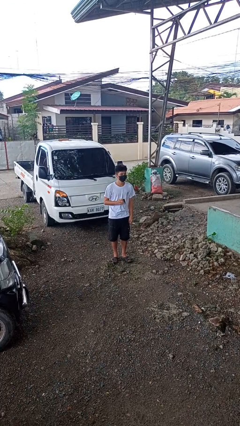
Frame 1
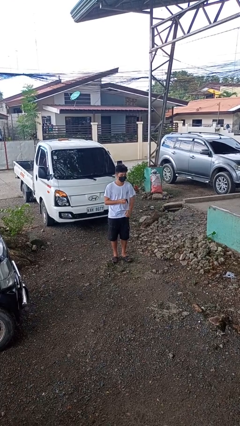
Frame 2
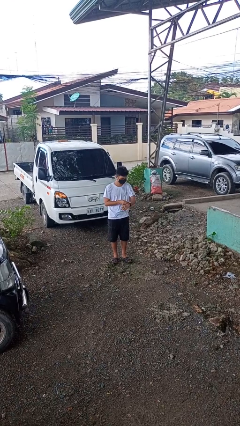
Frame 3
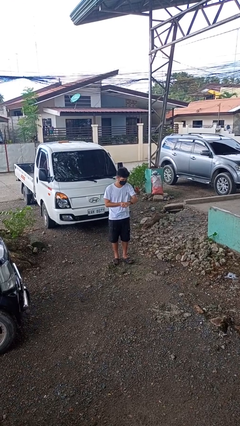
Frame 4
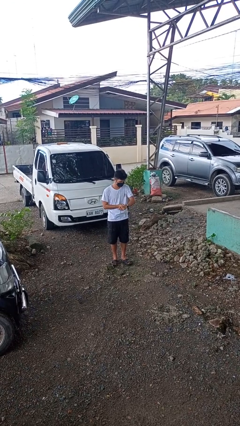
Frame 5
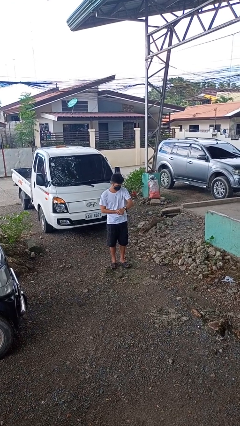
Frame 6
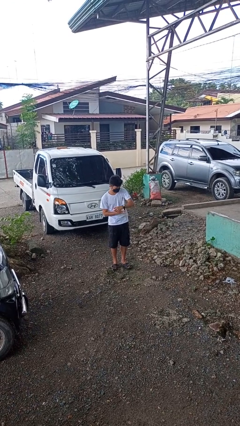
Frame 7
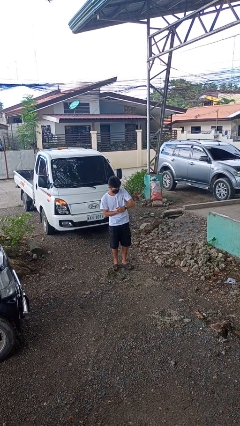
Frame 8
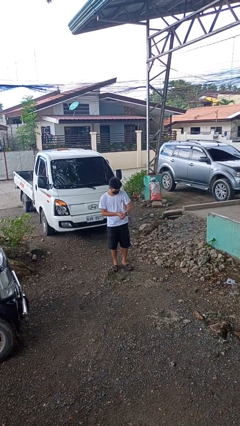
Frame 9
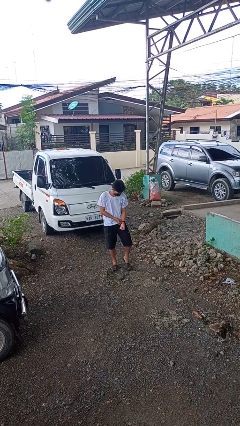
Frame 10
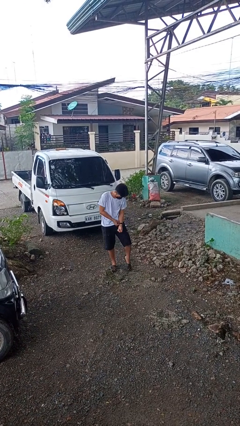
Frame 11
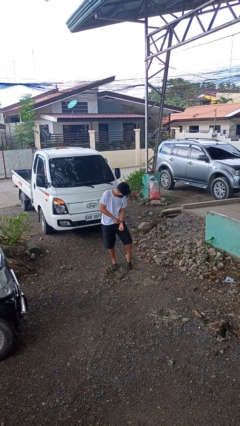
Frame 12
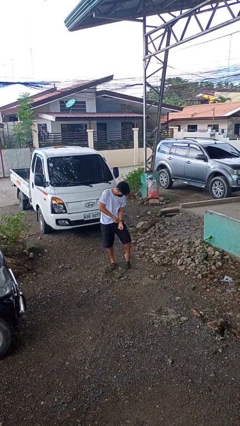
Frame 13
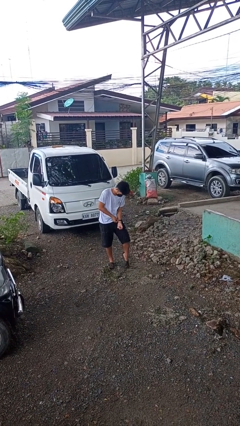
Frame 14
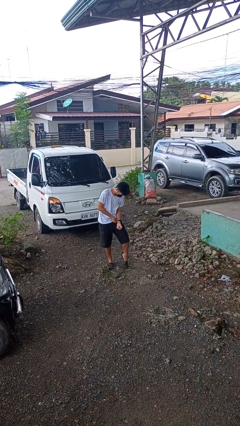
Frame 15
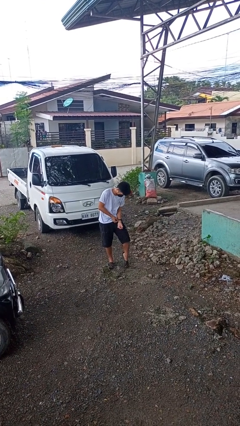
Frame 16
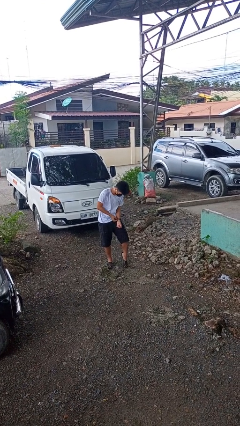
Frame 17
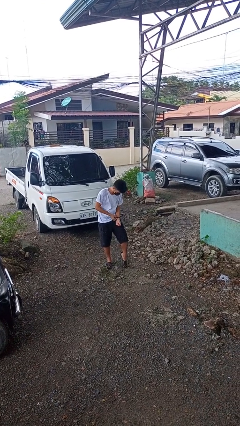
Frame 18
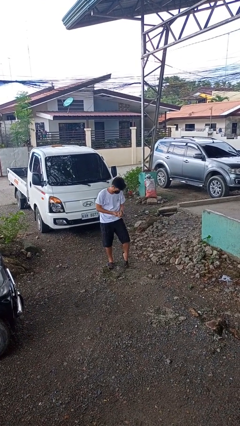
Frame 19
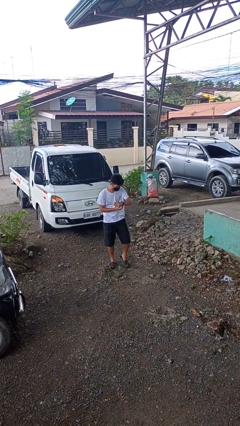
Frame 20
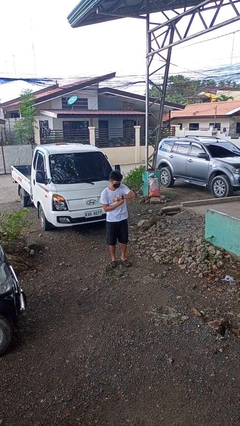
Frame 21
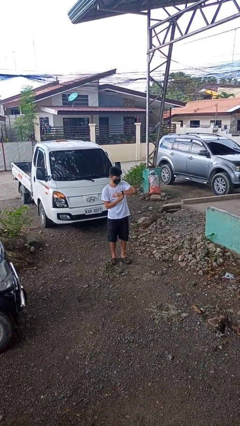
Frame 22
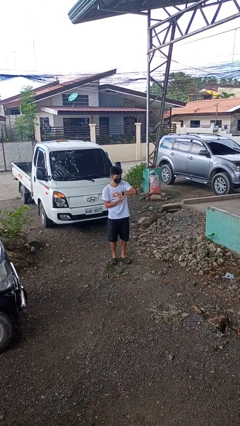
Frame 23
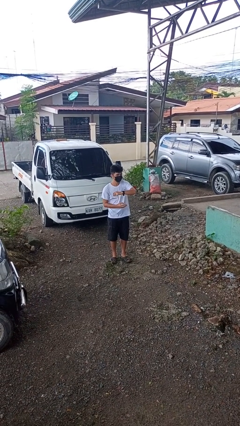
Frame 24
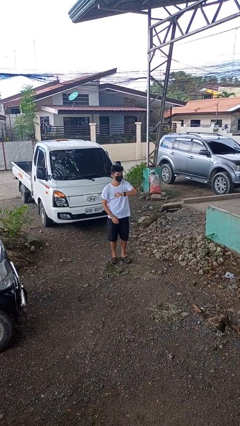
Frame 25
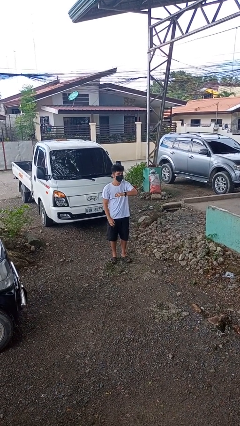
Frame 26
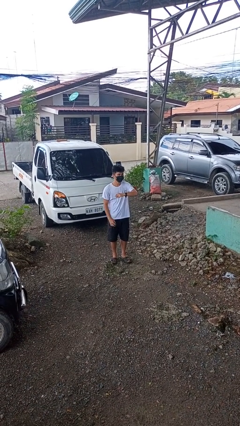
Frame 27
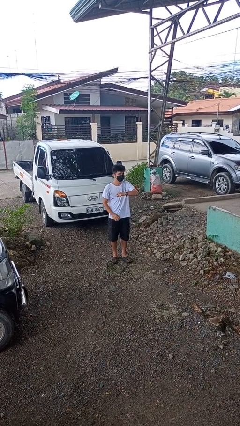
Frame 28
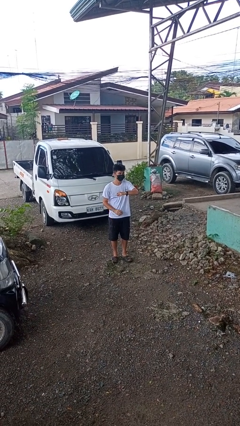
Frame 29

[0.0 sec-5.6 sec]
person puts on wristwatch

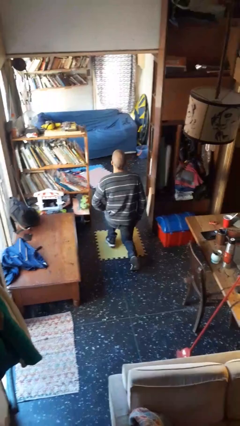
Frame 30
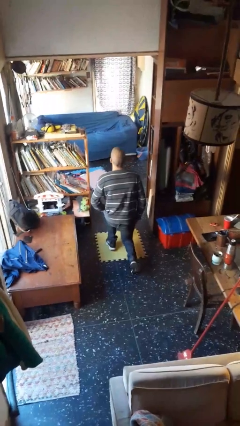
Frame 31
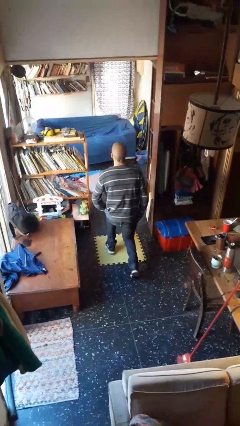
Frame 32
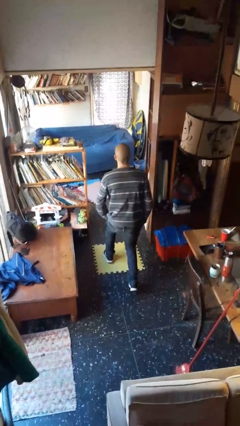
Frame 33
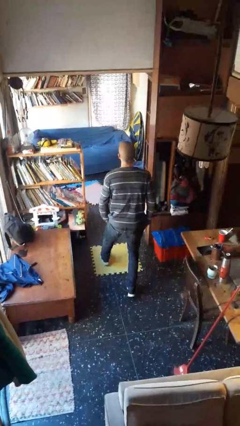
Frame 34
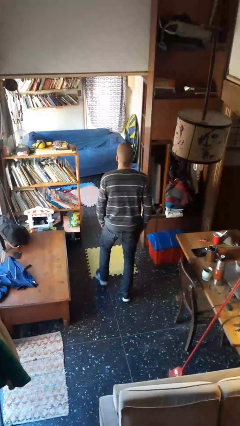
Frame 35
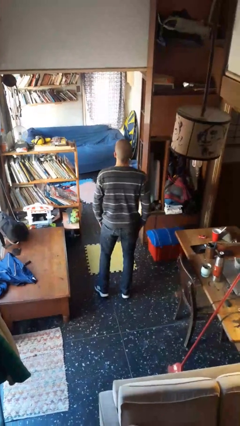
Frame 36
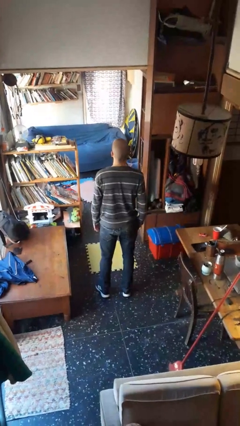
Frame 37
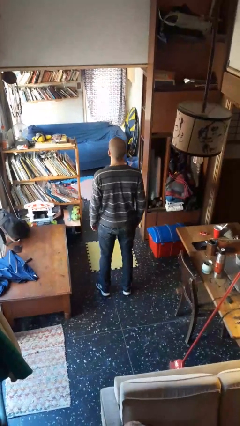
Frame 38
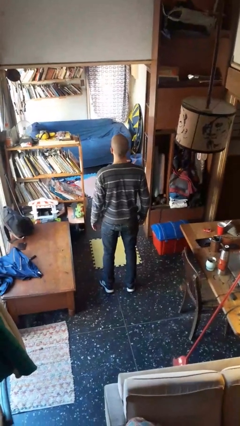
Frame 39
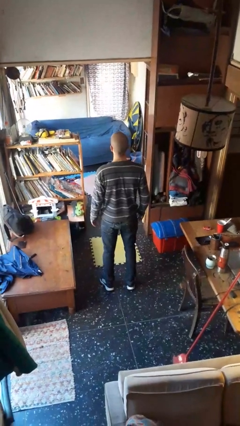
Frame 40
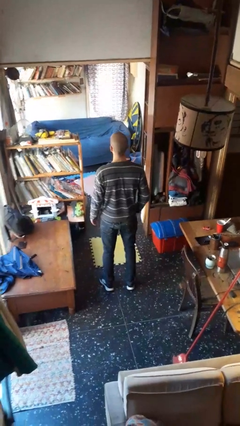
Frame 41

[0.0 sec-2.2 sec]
person stands up from floor

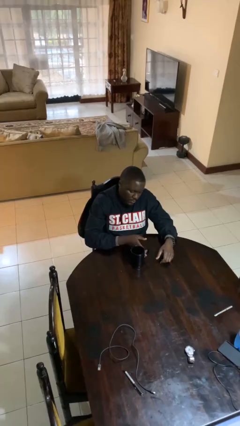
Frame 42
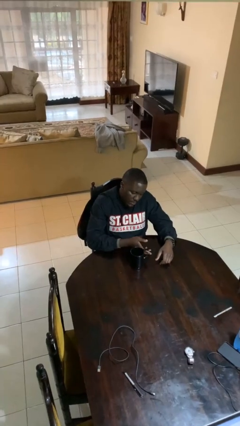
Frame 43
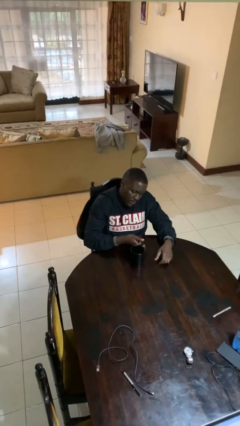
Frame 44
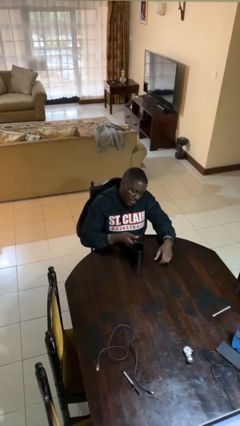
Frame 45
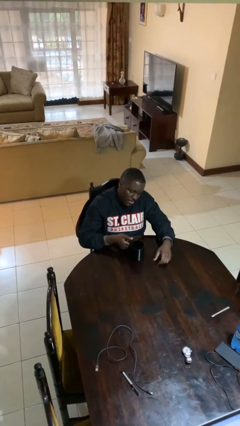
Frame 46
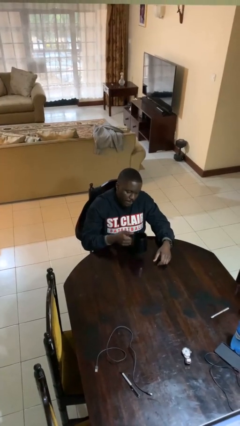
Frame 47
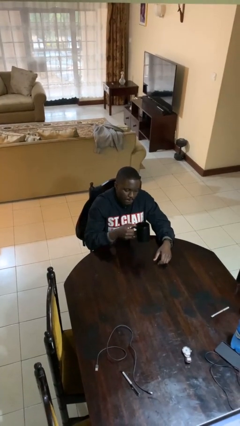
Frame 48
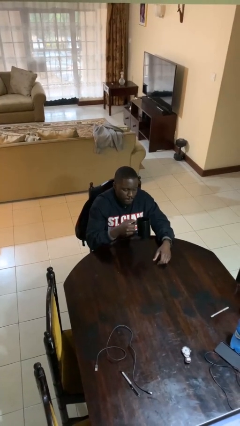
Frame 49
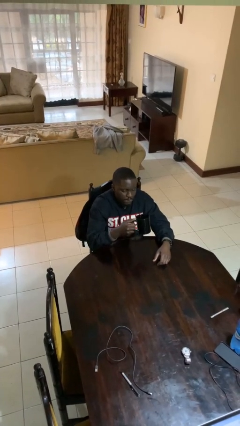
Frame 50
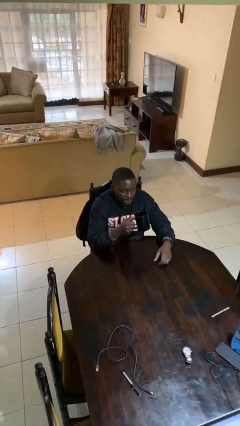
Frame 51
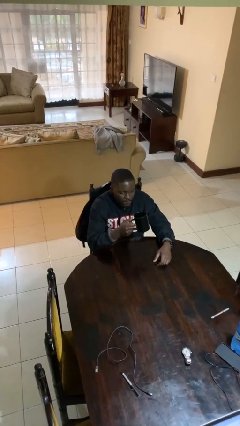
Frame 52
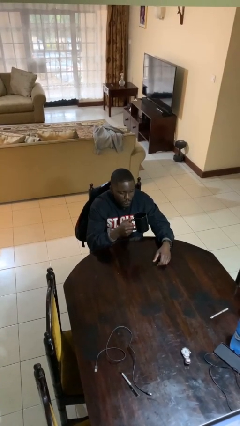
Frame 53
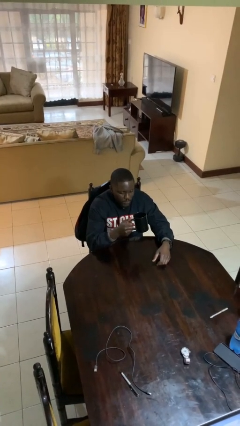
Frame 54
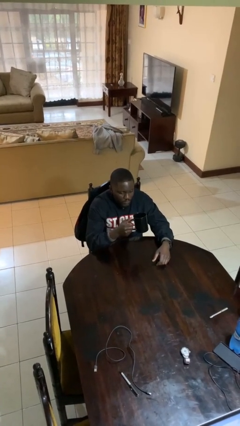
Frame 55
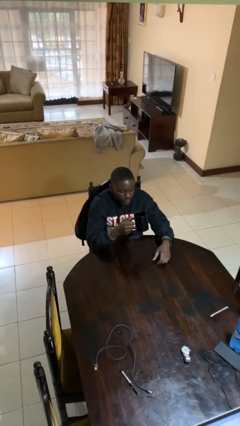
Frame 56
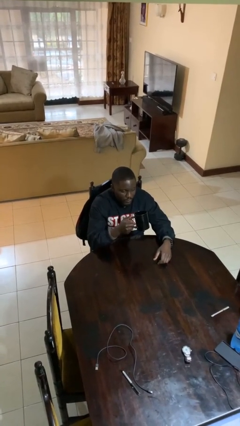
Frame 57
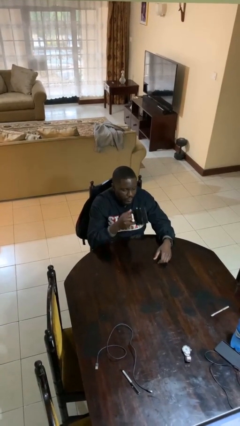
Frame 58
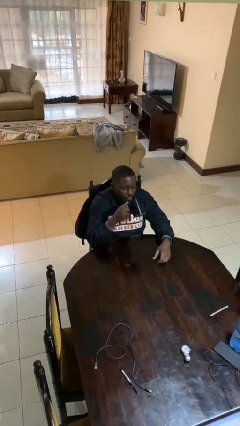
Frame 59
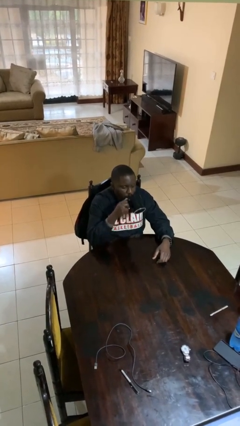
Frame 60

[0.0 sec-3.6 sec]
person picks up object from table

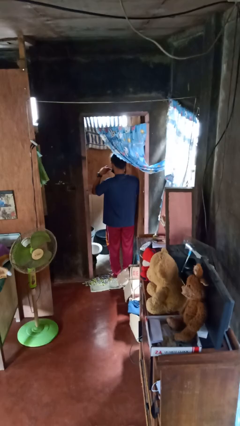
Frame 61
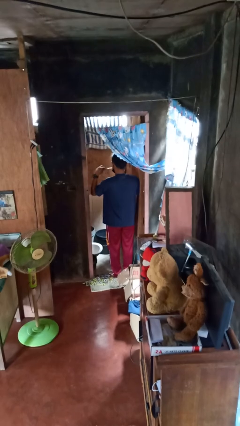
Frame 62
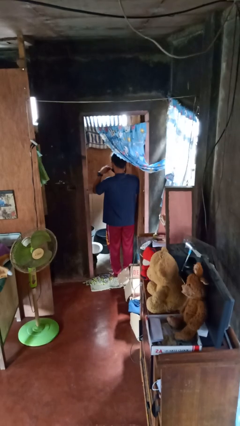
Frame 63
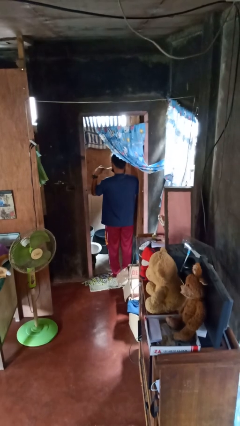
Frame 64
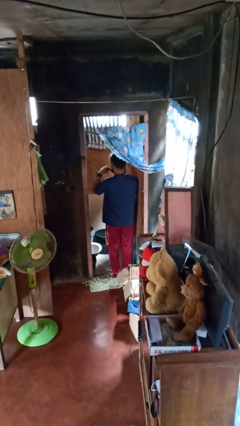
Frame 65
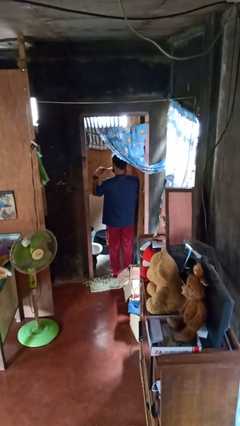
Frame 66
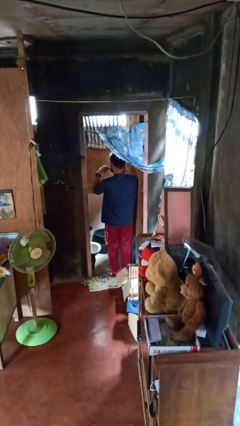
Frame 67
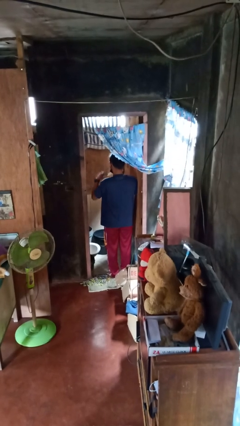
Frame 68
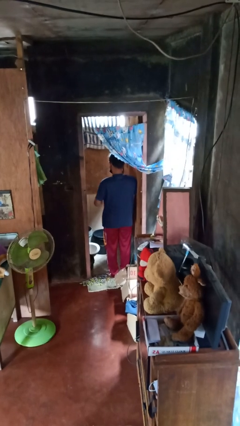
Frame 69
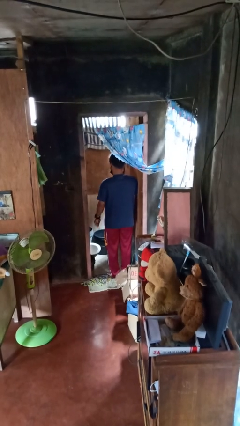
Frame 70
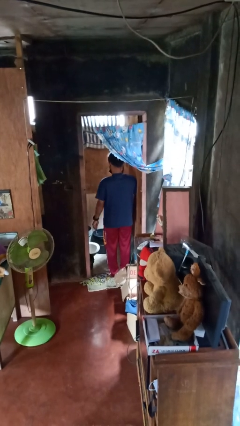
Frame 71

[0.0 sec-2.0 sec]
person brushes teeth

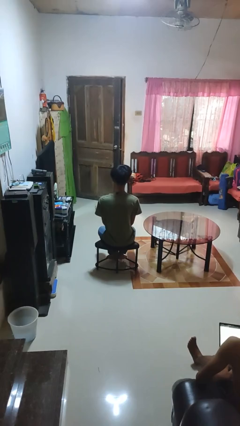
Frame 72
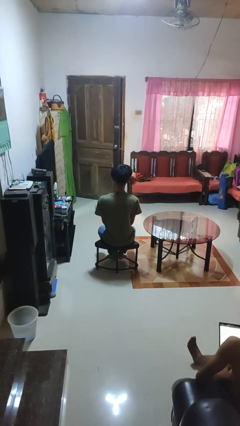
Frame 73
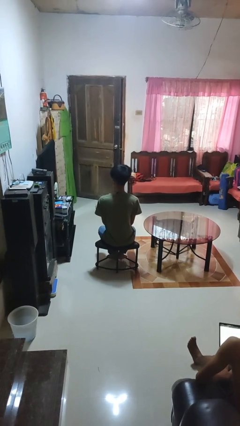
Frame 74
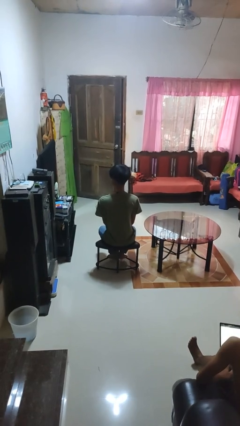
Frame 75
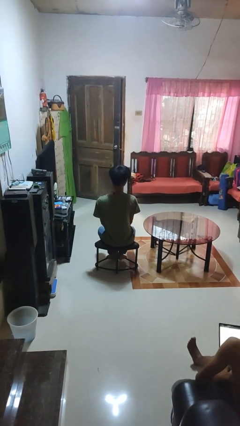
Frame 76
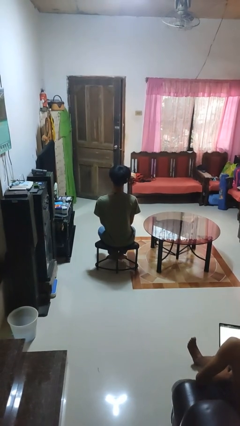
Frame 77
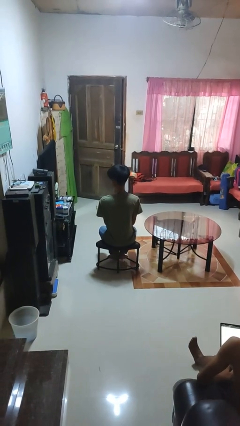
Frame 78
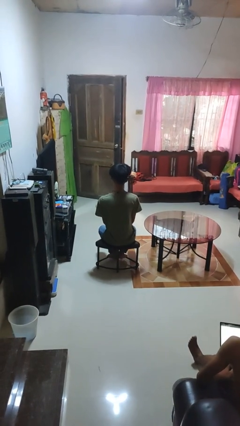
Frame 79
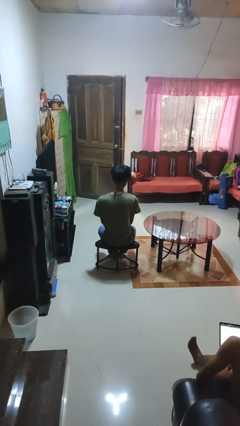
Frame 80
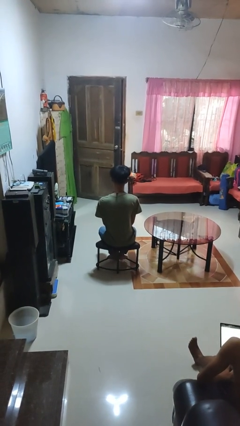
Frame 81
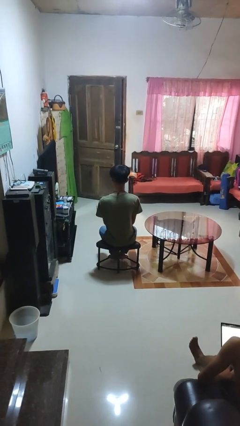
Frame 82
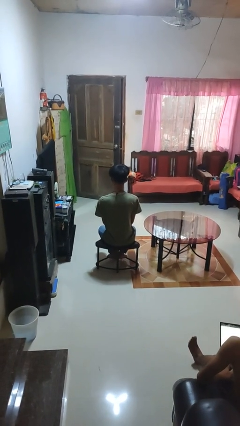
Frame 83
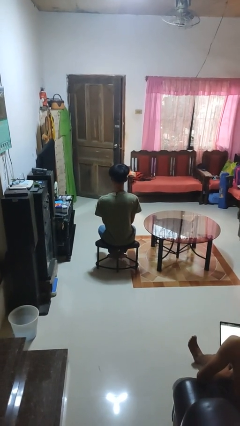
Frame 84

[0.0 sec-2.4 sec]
person shakes head

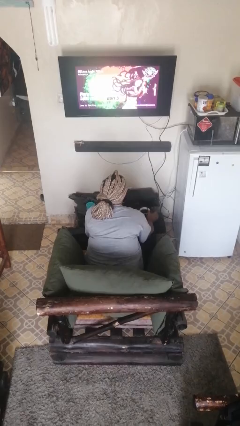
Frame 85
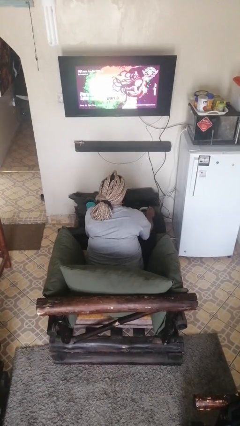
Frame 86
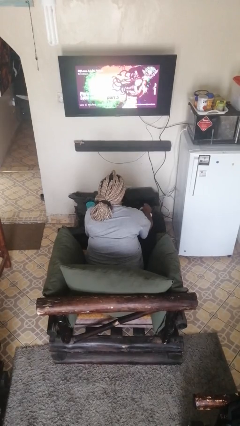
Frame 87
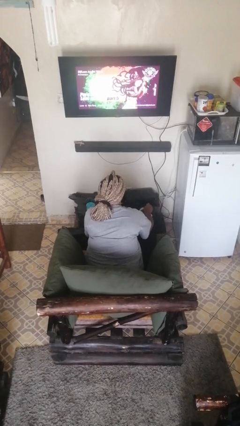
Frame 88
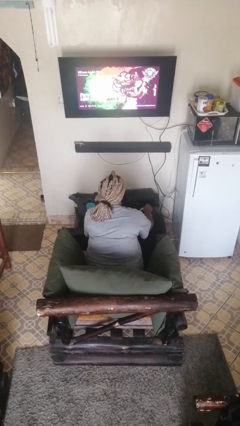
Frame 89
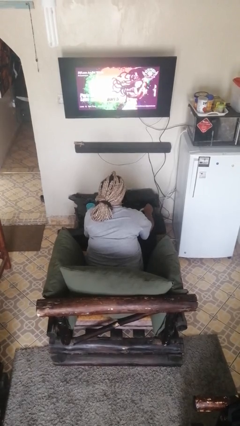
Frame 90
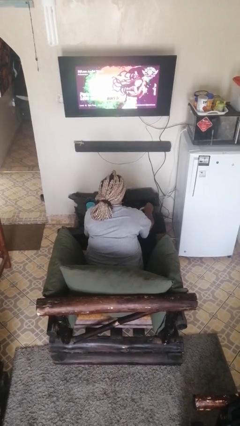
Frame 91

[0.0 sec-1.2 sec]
person stirs mug
